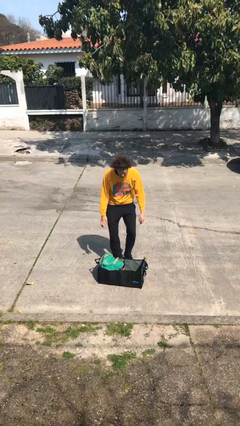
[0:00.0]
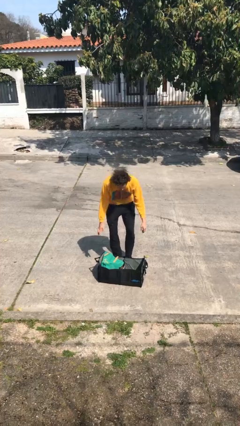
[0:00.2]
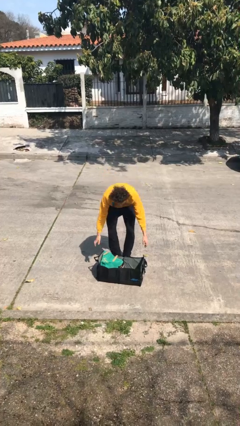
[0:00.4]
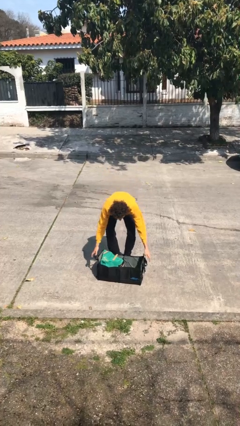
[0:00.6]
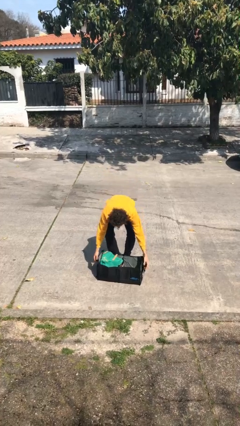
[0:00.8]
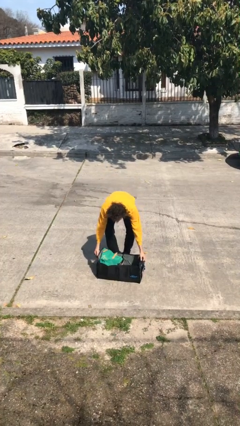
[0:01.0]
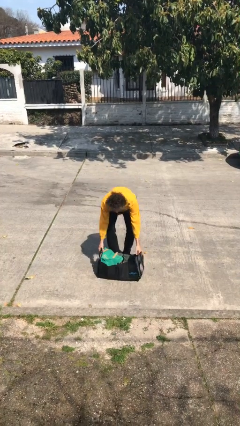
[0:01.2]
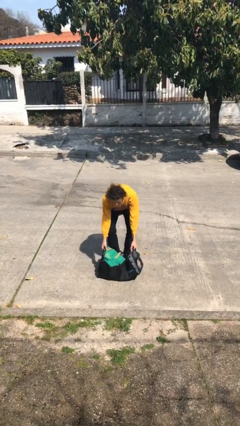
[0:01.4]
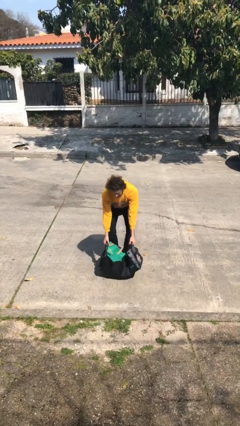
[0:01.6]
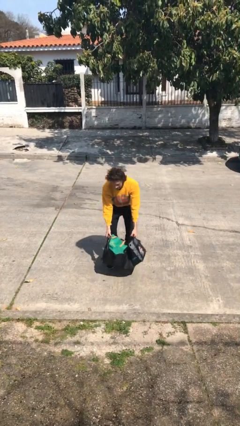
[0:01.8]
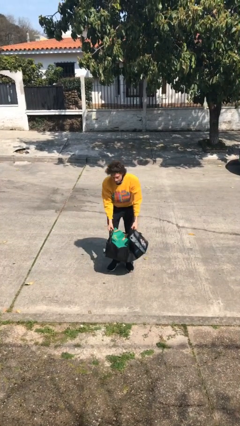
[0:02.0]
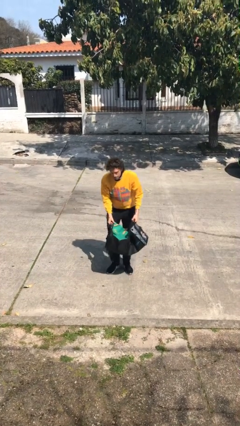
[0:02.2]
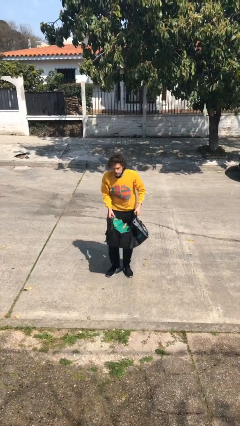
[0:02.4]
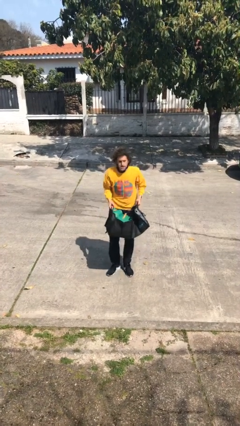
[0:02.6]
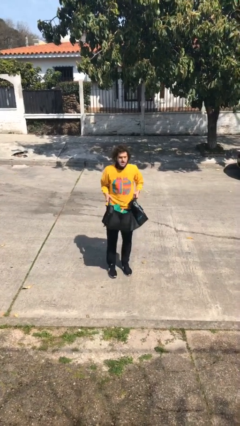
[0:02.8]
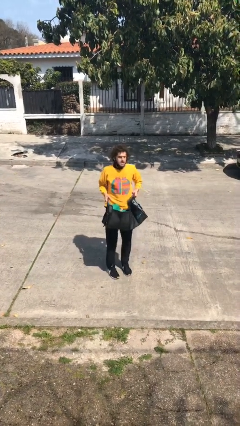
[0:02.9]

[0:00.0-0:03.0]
person picks up object from floor

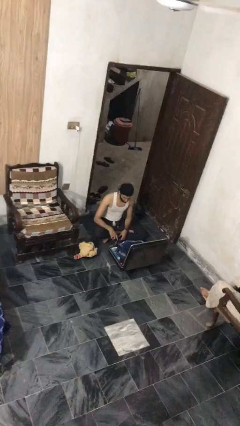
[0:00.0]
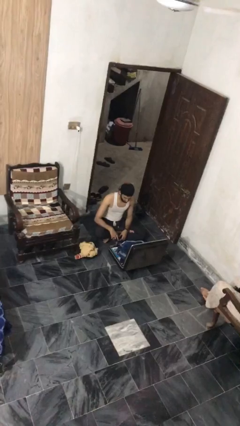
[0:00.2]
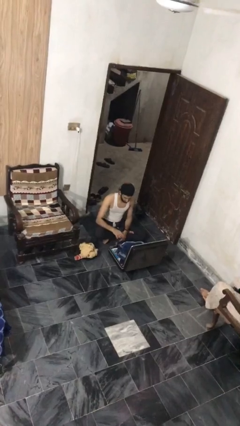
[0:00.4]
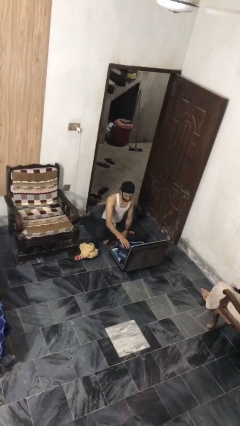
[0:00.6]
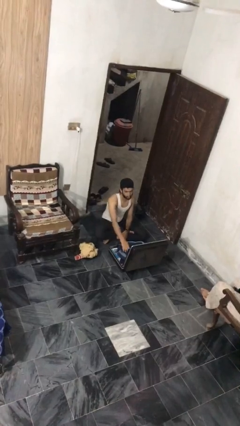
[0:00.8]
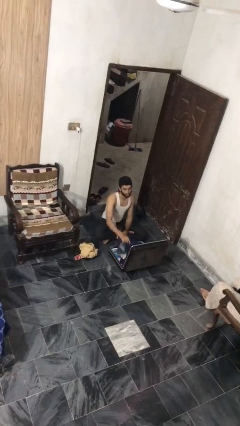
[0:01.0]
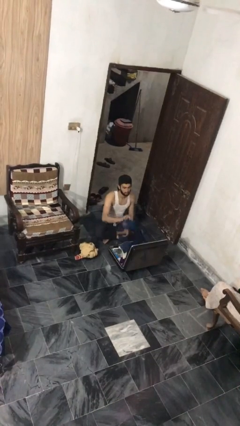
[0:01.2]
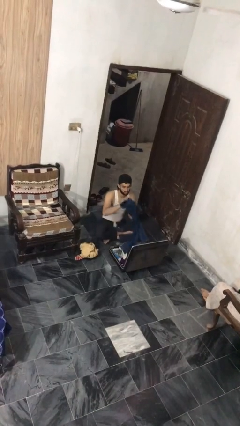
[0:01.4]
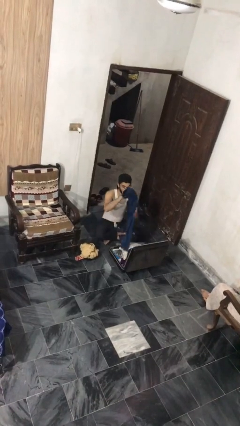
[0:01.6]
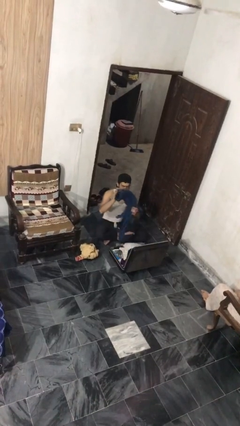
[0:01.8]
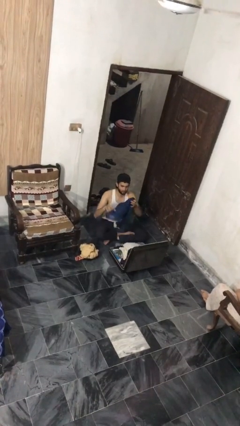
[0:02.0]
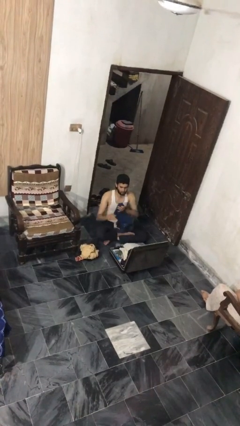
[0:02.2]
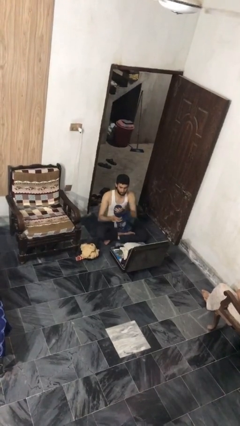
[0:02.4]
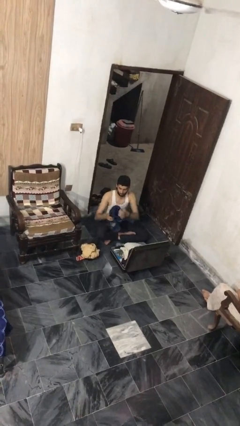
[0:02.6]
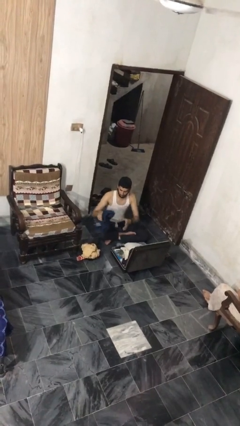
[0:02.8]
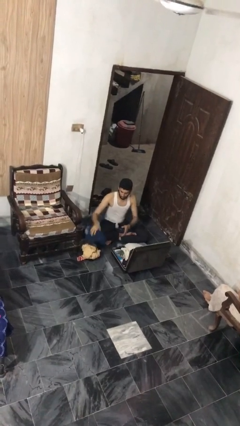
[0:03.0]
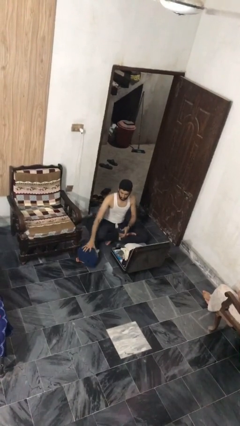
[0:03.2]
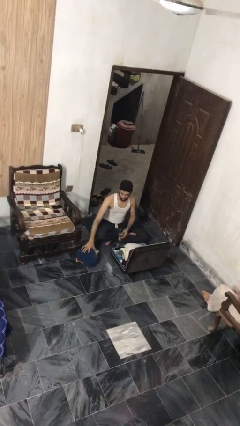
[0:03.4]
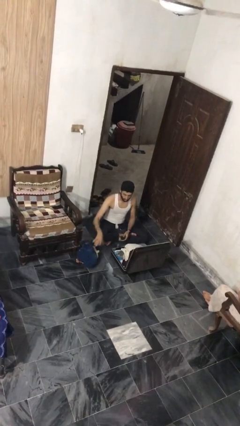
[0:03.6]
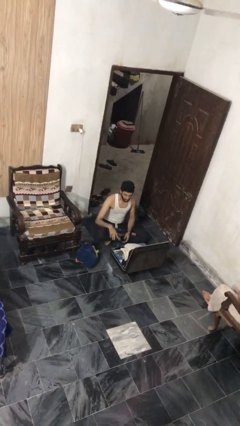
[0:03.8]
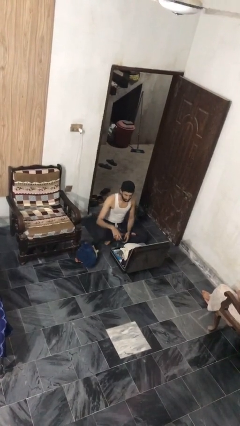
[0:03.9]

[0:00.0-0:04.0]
person unloads clothes from suitcase

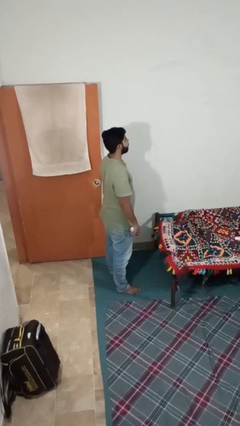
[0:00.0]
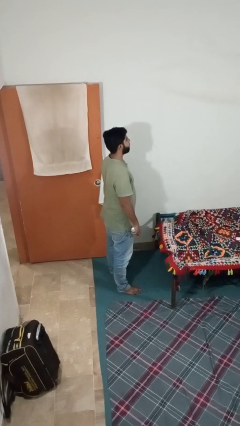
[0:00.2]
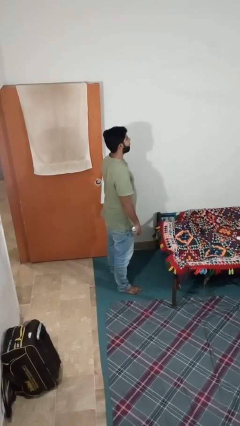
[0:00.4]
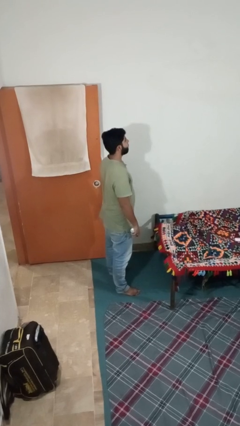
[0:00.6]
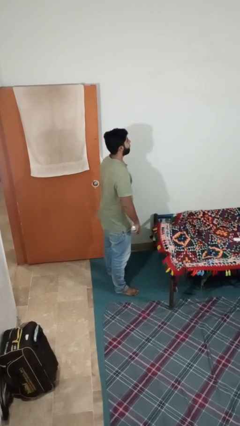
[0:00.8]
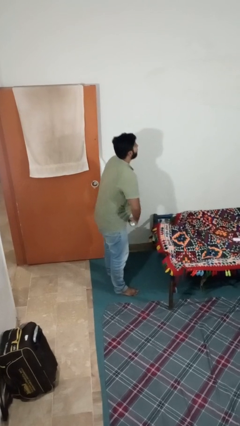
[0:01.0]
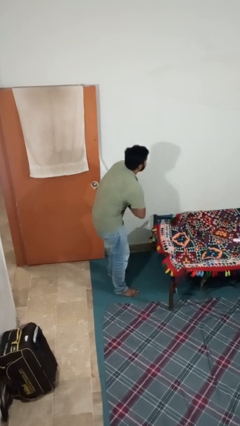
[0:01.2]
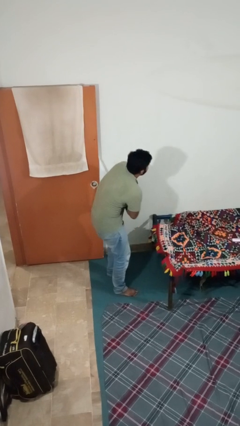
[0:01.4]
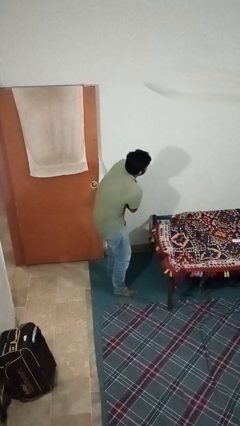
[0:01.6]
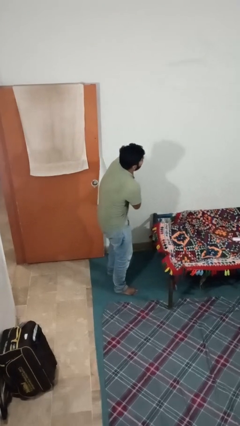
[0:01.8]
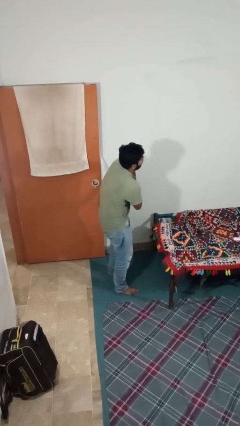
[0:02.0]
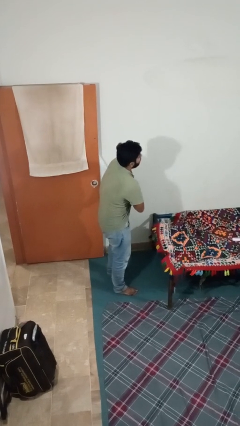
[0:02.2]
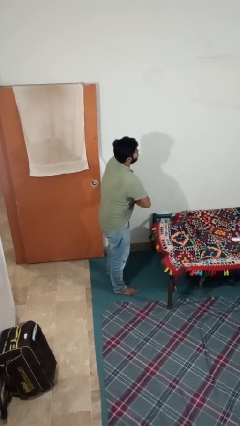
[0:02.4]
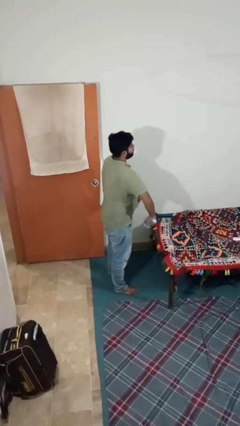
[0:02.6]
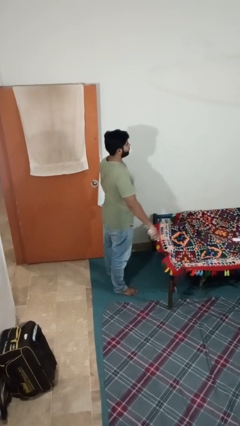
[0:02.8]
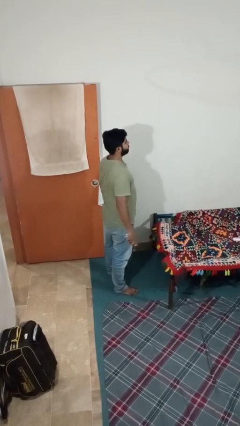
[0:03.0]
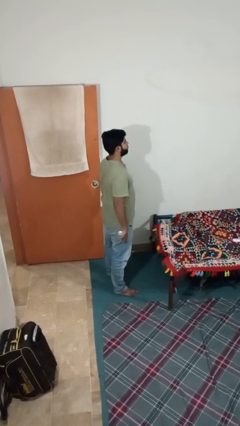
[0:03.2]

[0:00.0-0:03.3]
person applies deodorant

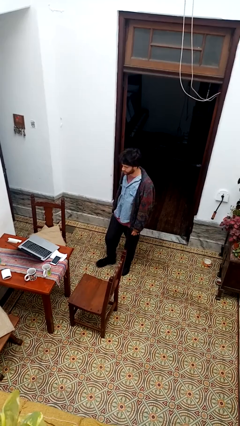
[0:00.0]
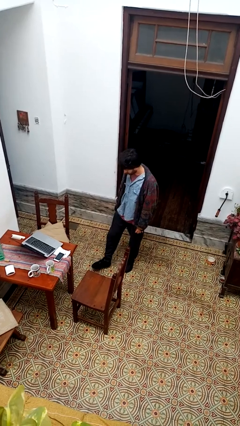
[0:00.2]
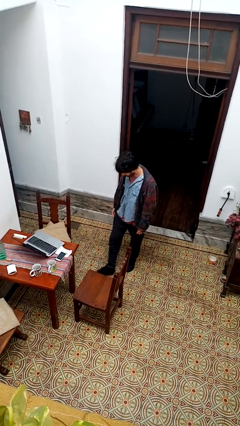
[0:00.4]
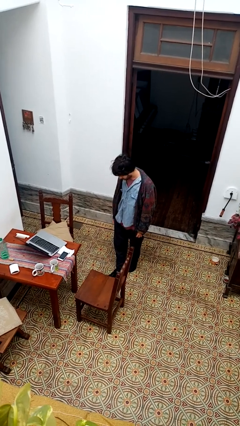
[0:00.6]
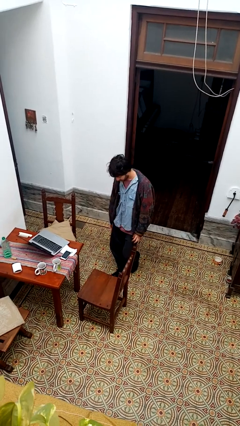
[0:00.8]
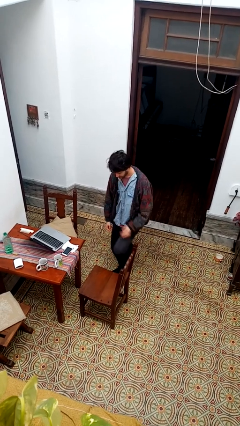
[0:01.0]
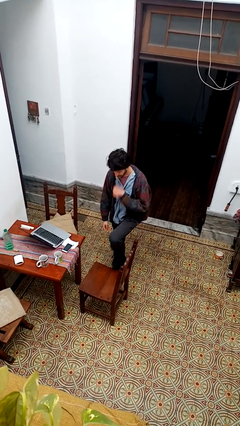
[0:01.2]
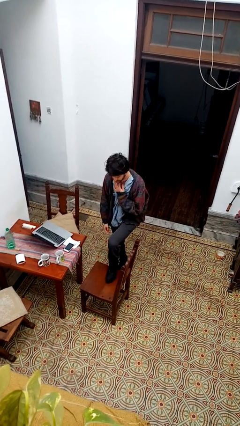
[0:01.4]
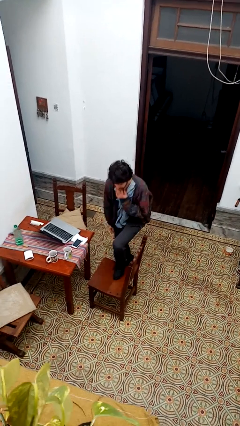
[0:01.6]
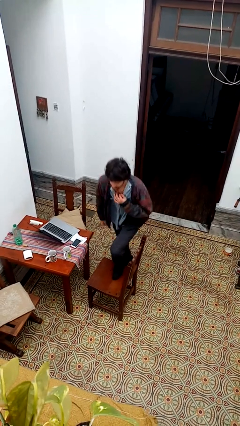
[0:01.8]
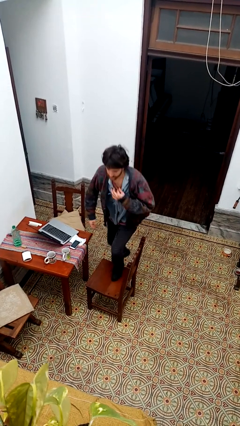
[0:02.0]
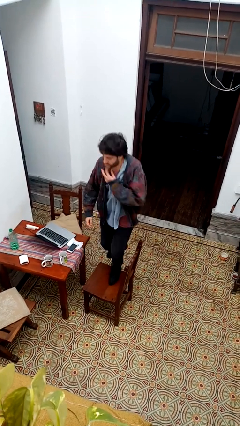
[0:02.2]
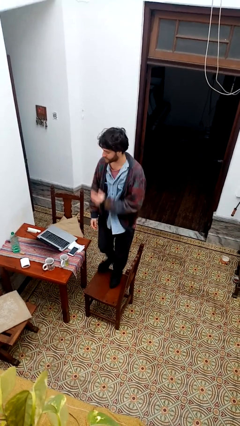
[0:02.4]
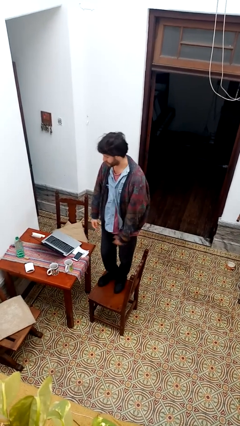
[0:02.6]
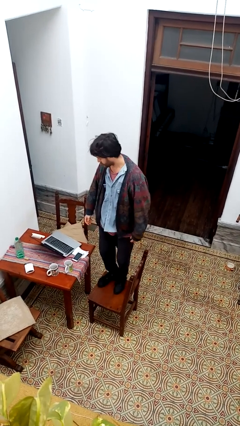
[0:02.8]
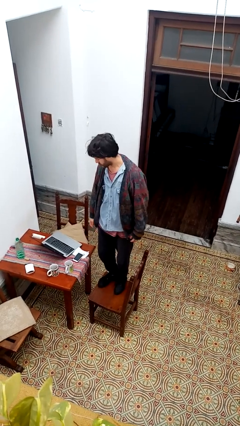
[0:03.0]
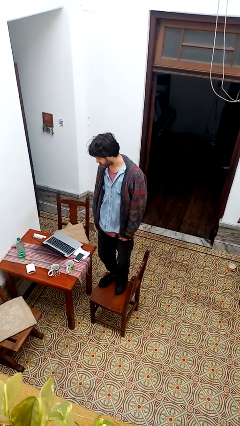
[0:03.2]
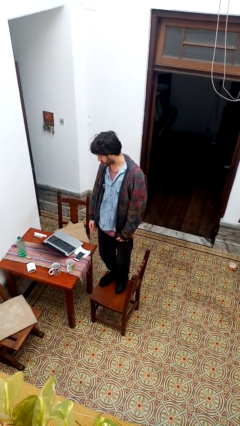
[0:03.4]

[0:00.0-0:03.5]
person climbs on chair

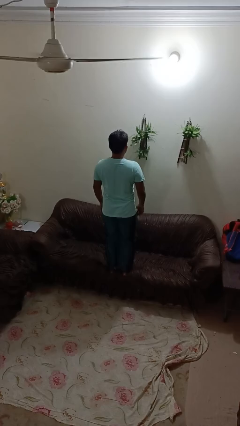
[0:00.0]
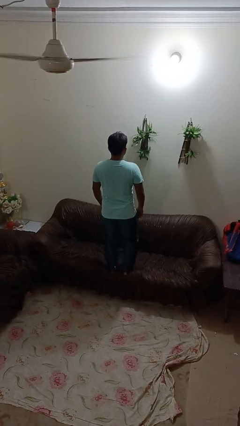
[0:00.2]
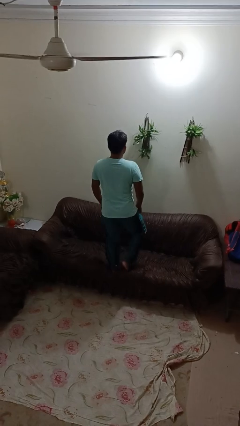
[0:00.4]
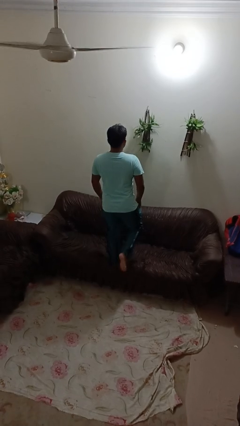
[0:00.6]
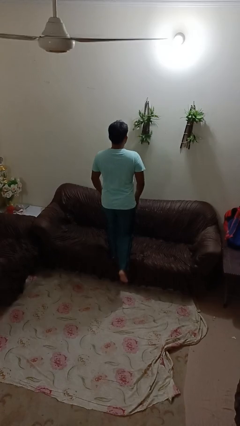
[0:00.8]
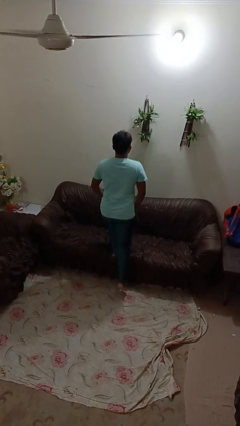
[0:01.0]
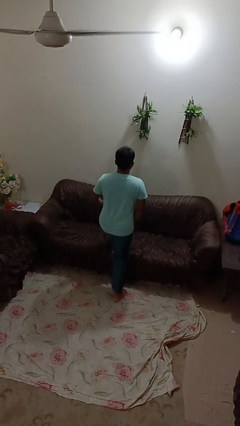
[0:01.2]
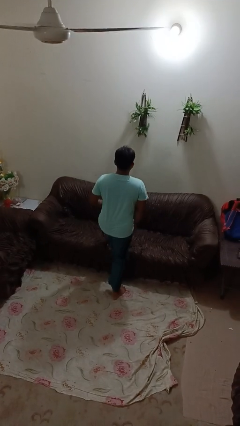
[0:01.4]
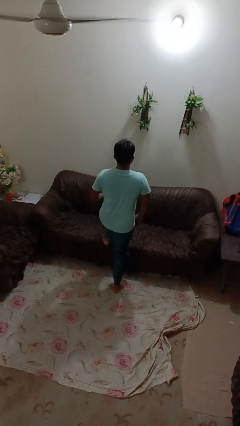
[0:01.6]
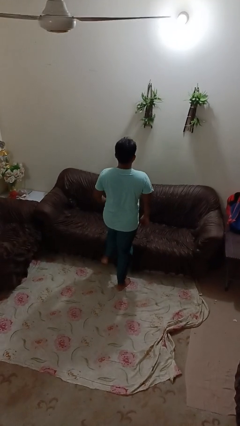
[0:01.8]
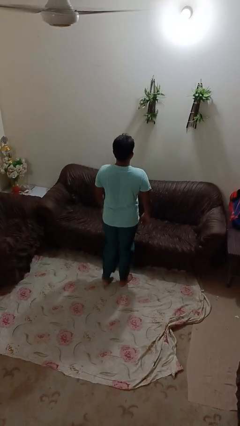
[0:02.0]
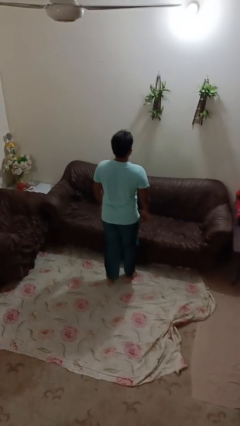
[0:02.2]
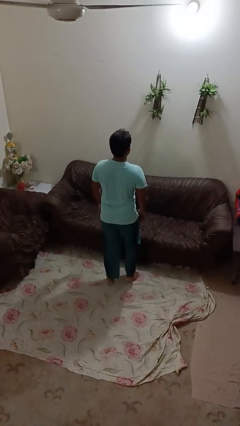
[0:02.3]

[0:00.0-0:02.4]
person climbs off couch

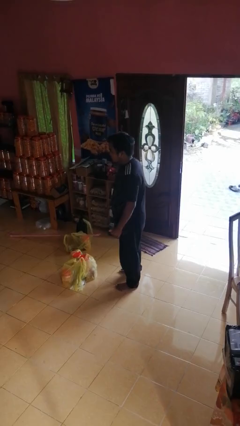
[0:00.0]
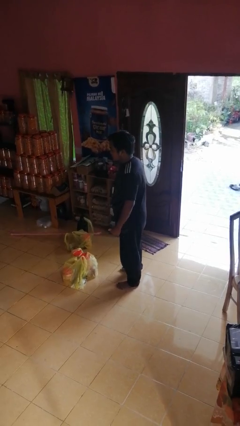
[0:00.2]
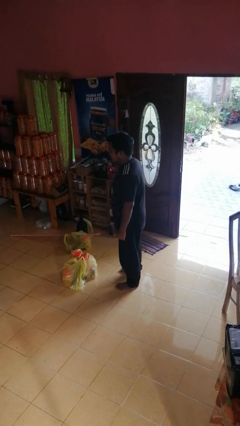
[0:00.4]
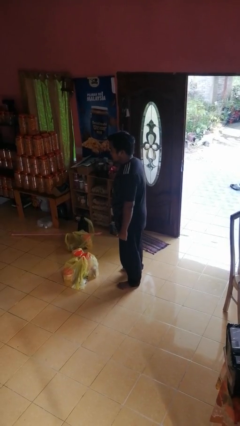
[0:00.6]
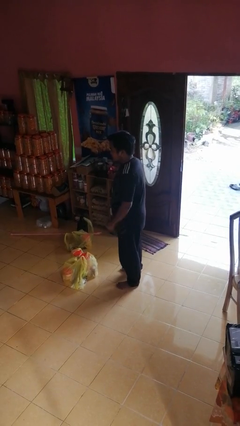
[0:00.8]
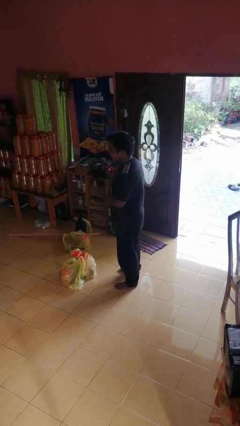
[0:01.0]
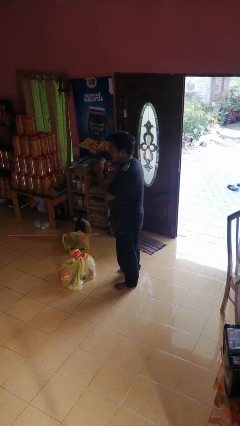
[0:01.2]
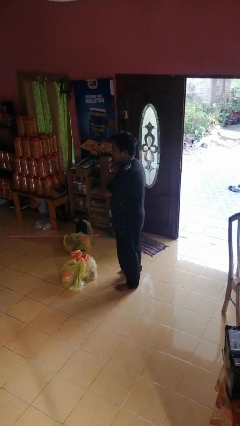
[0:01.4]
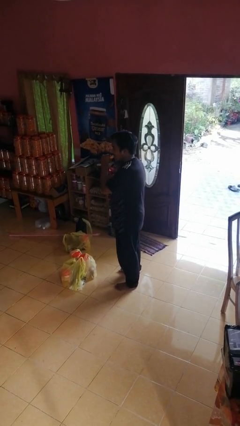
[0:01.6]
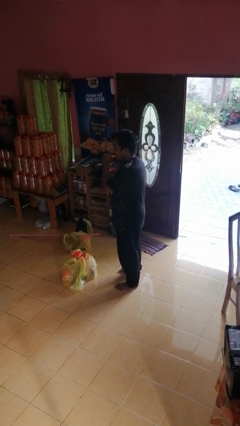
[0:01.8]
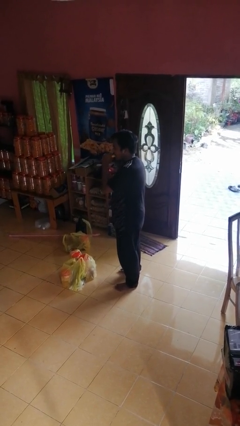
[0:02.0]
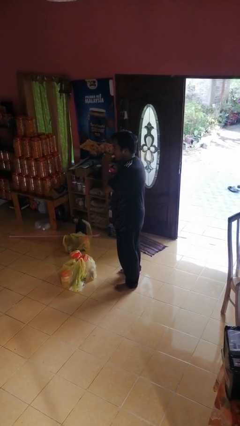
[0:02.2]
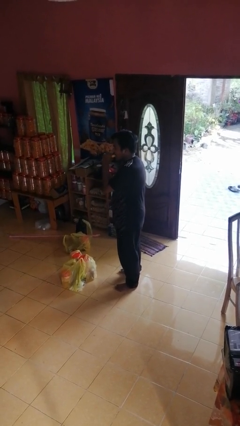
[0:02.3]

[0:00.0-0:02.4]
person eats banana
